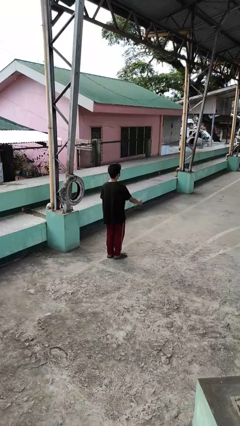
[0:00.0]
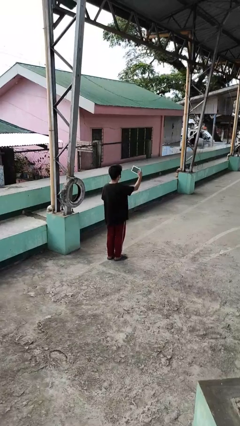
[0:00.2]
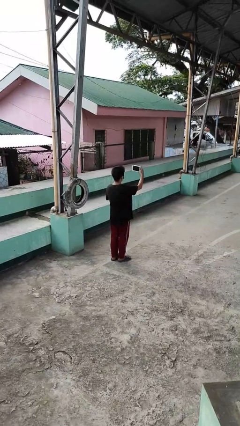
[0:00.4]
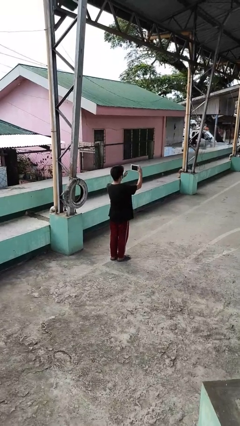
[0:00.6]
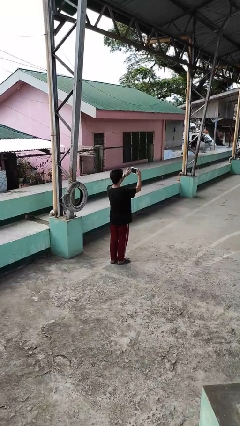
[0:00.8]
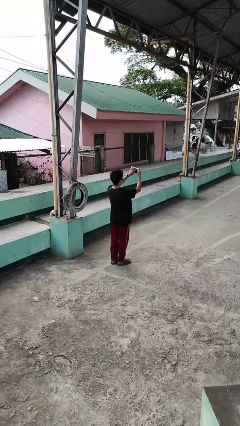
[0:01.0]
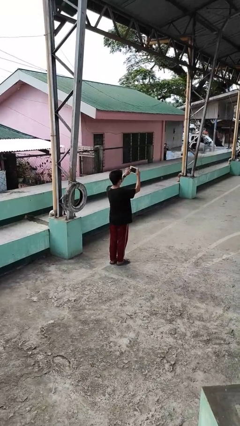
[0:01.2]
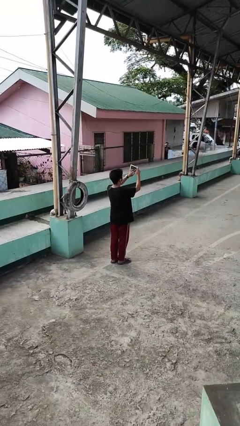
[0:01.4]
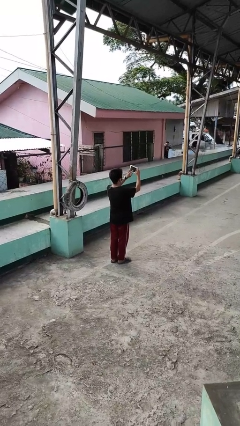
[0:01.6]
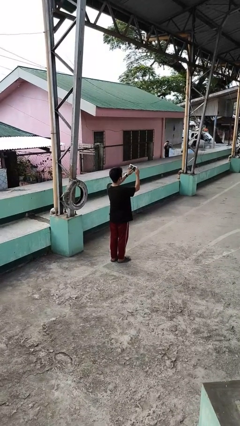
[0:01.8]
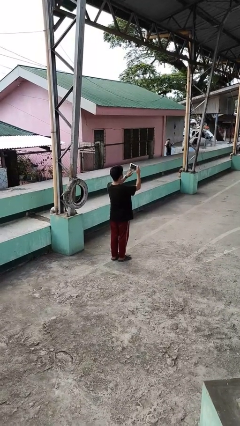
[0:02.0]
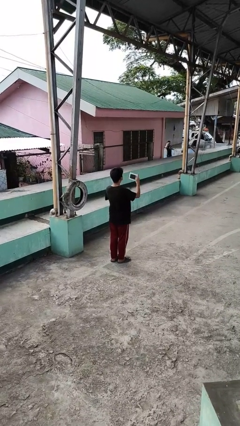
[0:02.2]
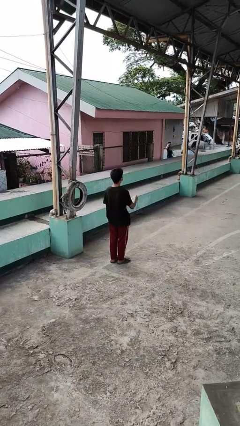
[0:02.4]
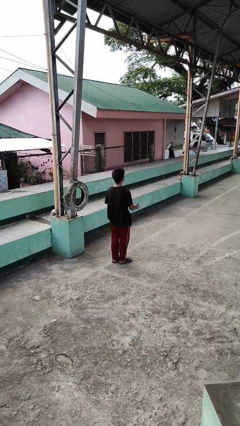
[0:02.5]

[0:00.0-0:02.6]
person interacts with tablet

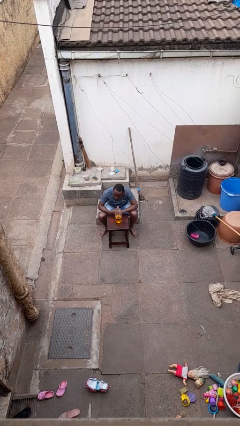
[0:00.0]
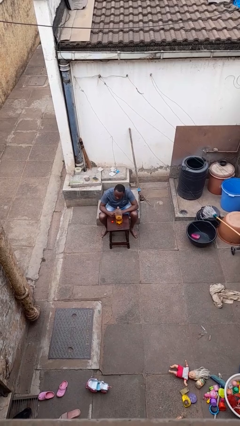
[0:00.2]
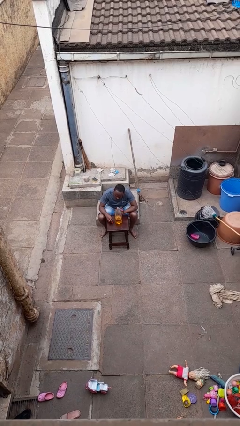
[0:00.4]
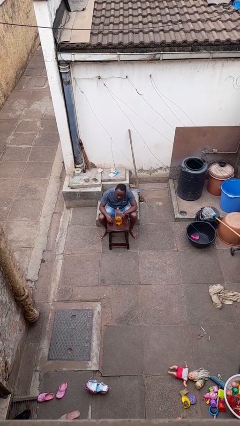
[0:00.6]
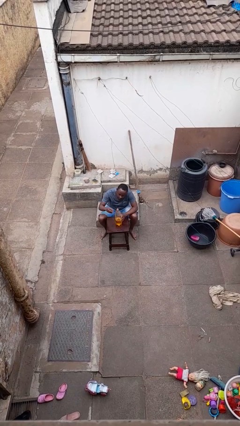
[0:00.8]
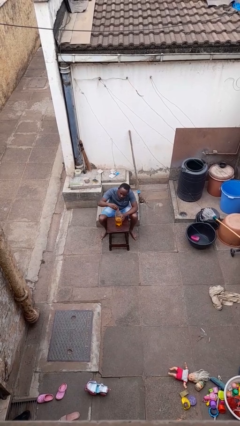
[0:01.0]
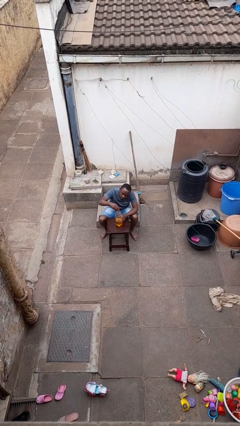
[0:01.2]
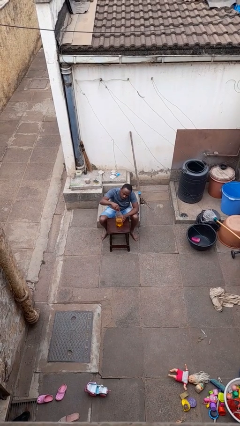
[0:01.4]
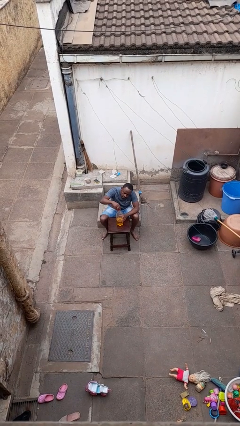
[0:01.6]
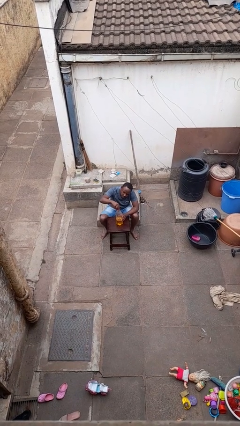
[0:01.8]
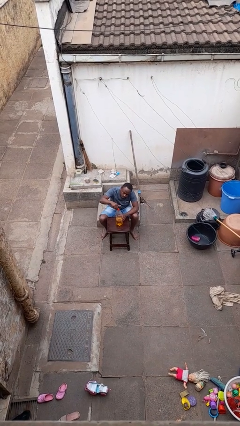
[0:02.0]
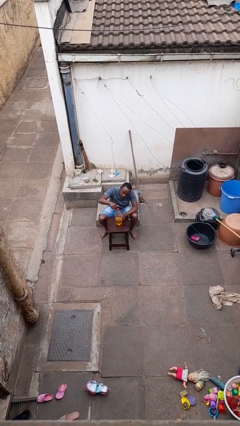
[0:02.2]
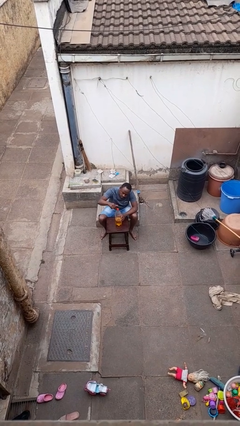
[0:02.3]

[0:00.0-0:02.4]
person screws lid to bottle

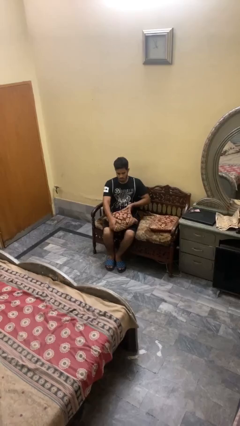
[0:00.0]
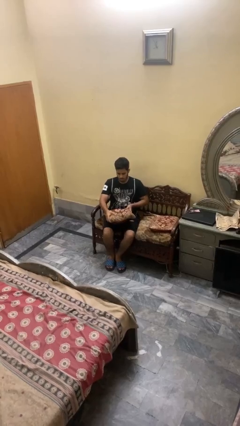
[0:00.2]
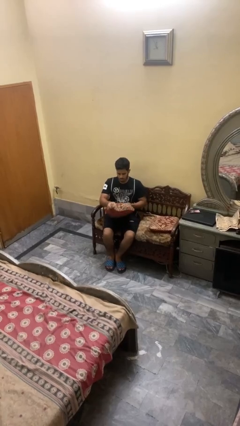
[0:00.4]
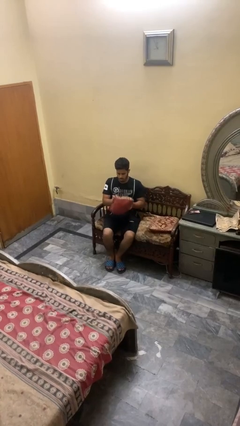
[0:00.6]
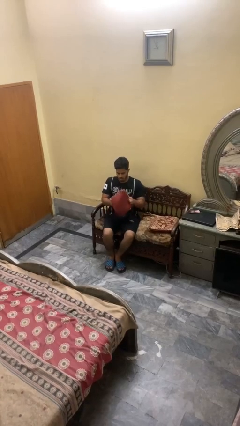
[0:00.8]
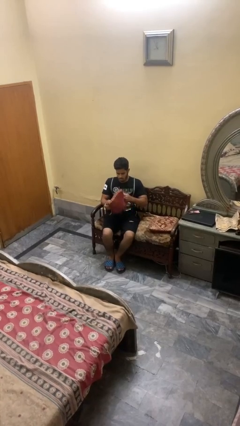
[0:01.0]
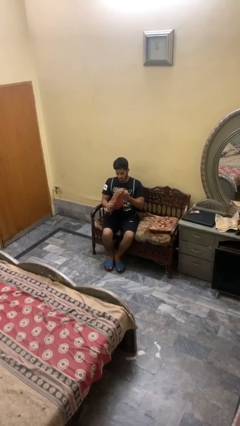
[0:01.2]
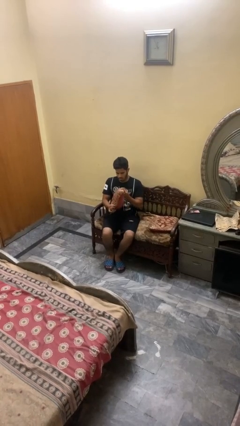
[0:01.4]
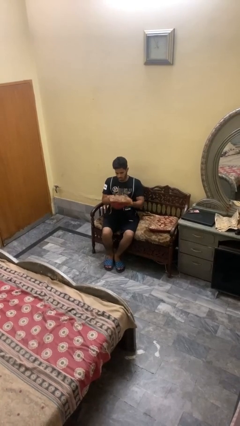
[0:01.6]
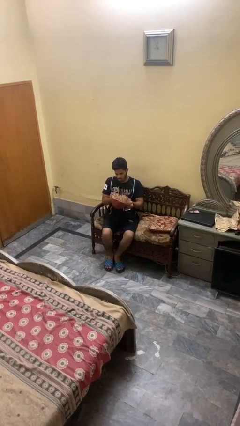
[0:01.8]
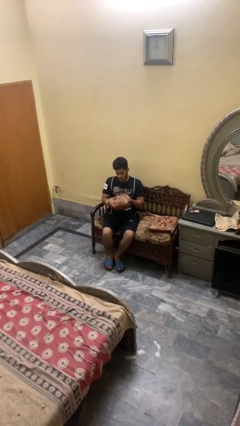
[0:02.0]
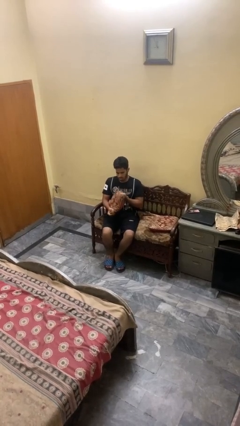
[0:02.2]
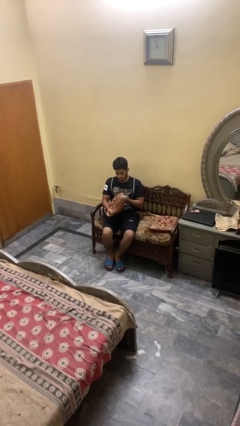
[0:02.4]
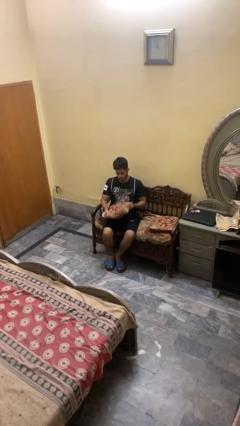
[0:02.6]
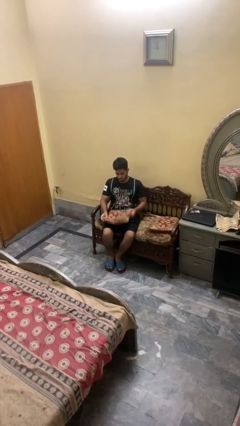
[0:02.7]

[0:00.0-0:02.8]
person squeezes object

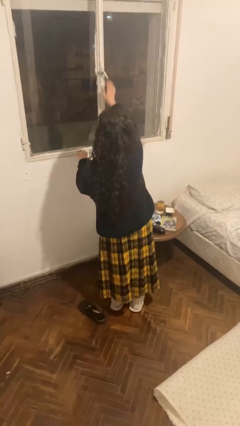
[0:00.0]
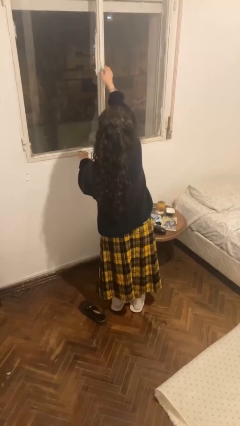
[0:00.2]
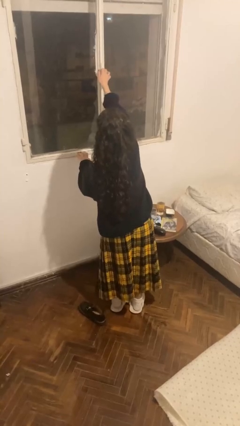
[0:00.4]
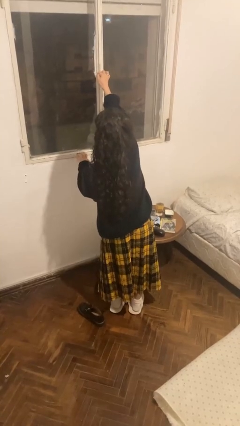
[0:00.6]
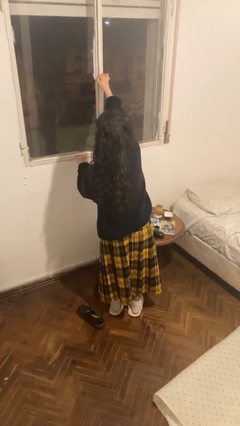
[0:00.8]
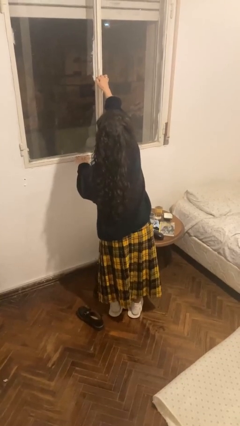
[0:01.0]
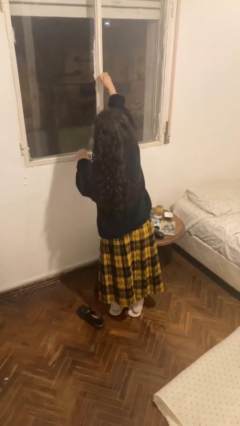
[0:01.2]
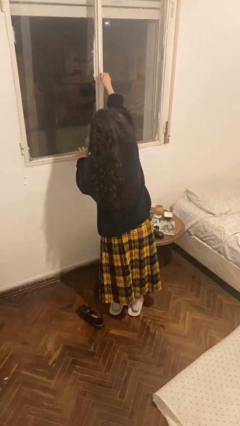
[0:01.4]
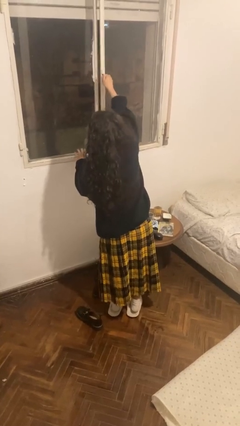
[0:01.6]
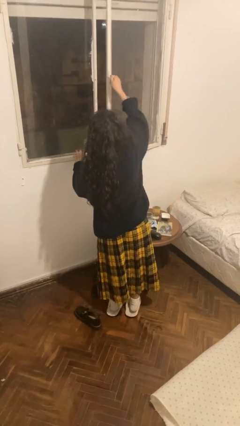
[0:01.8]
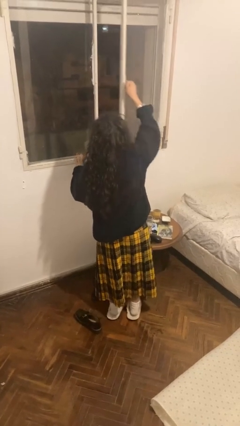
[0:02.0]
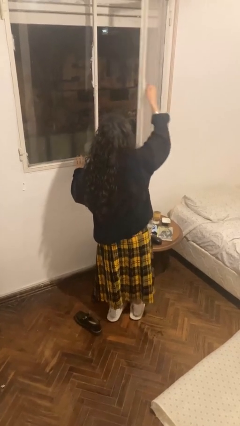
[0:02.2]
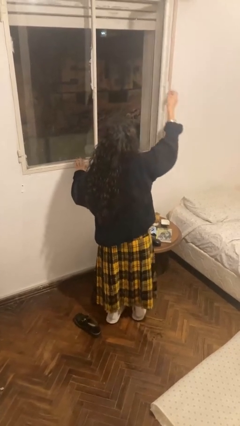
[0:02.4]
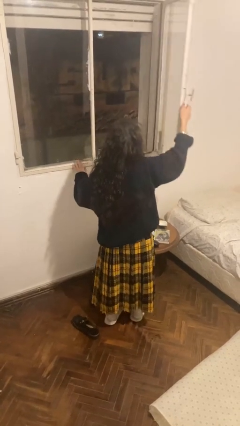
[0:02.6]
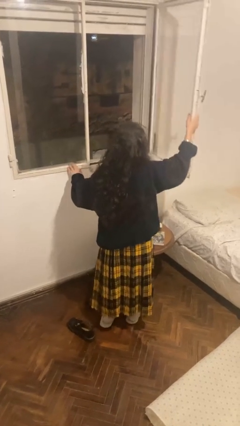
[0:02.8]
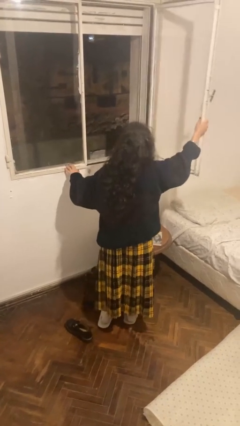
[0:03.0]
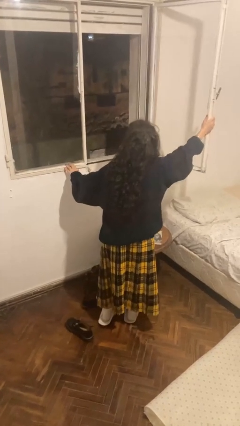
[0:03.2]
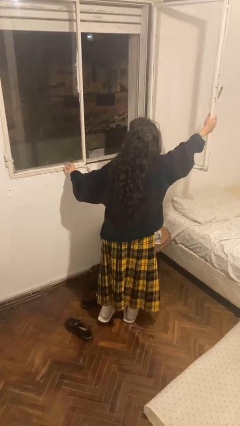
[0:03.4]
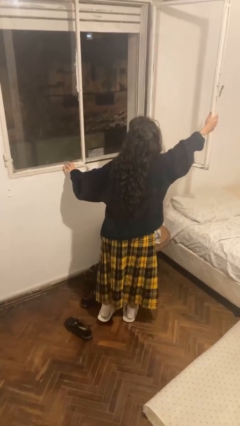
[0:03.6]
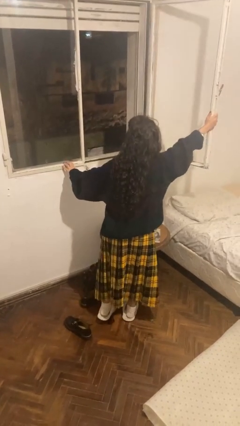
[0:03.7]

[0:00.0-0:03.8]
person opens home window

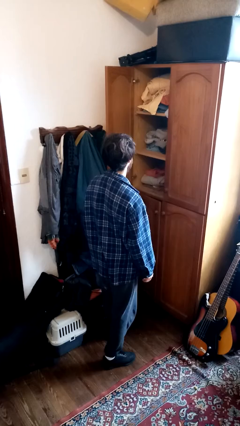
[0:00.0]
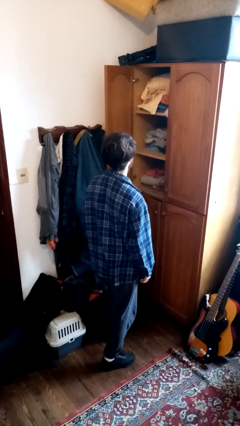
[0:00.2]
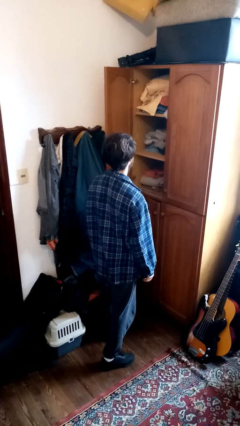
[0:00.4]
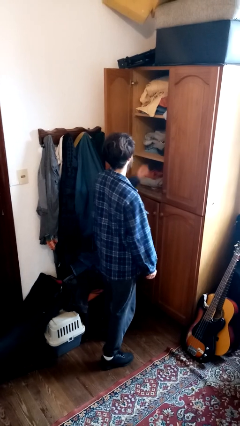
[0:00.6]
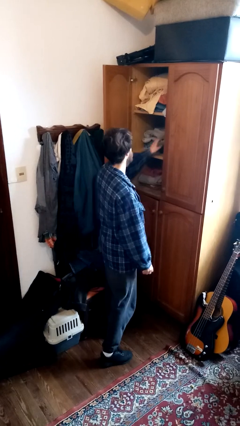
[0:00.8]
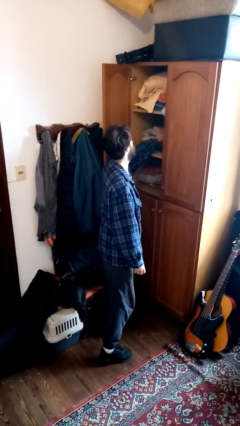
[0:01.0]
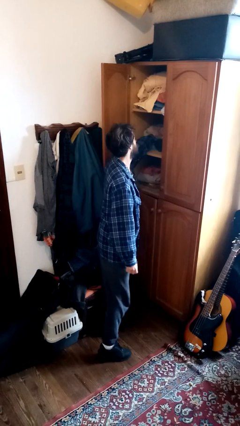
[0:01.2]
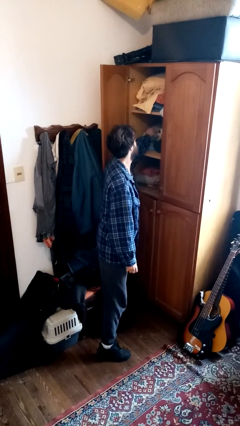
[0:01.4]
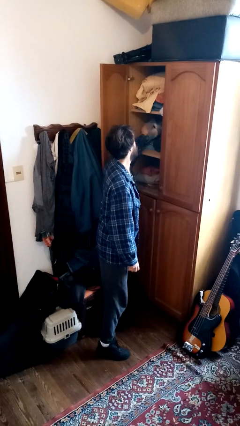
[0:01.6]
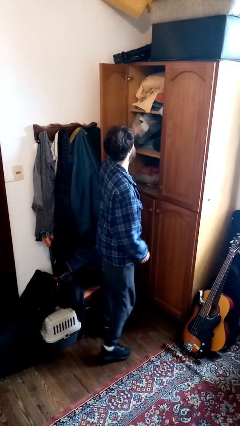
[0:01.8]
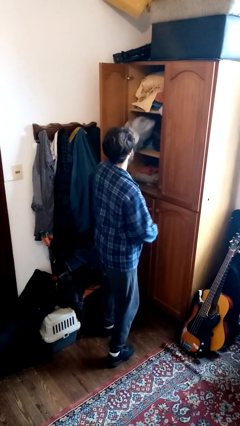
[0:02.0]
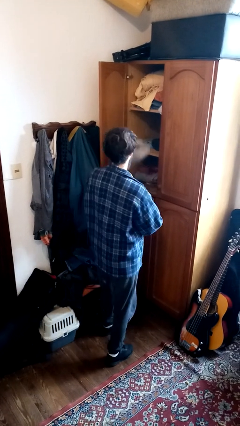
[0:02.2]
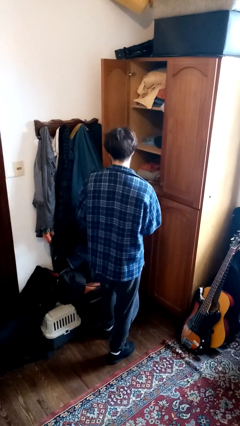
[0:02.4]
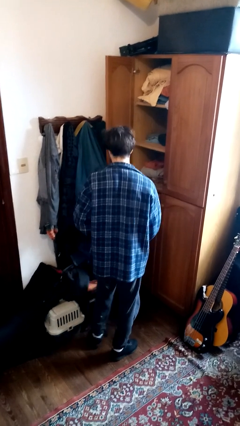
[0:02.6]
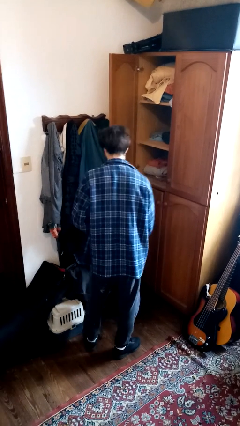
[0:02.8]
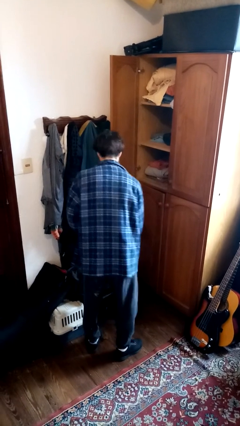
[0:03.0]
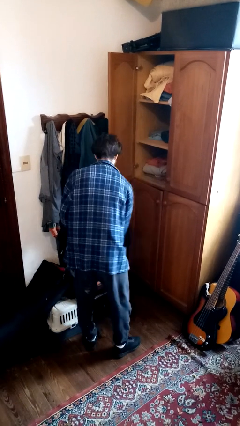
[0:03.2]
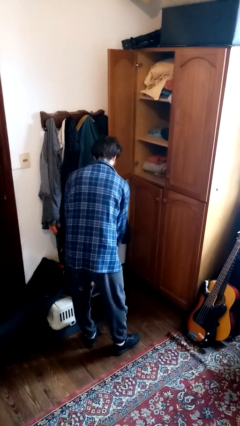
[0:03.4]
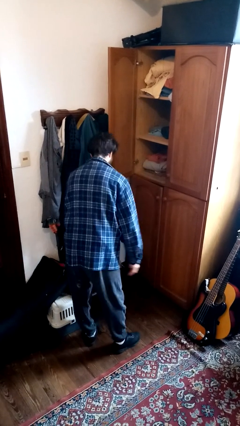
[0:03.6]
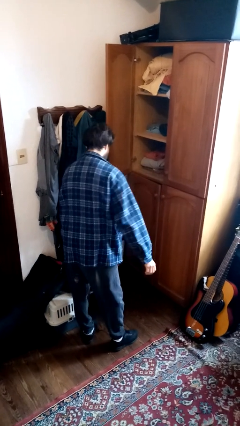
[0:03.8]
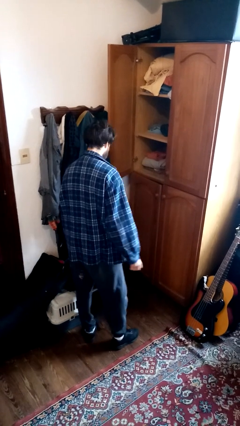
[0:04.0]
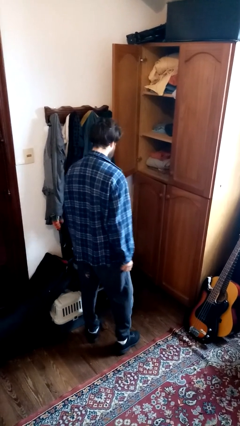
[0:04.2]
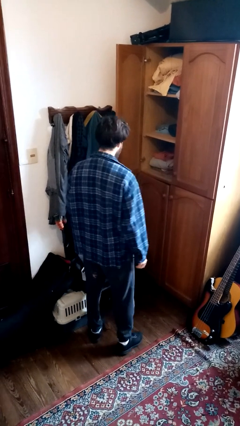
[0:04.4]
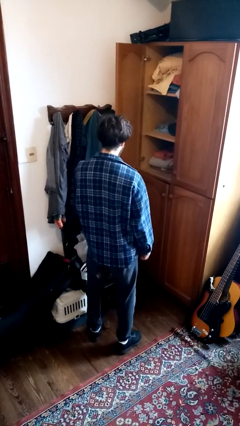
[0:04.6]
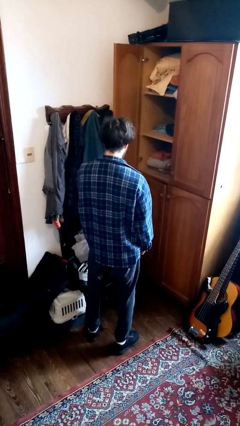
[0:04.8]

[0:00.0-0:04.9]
person takes clothes from dresser

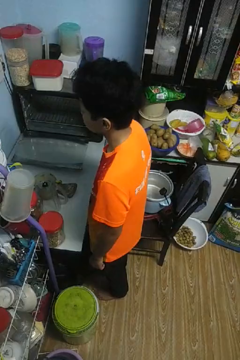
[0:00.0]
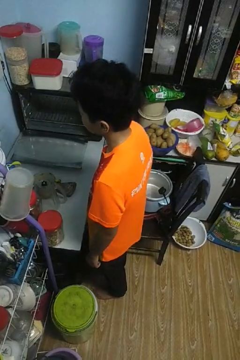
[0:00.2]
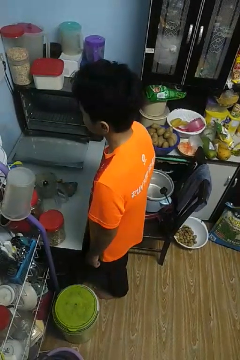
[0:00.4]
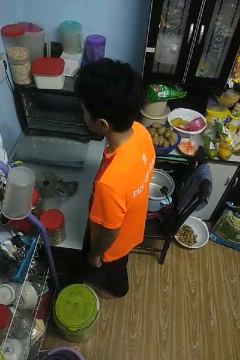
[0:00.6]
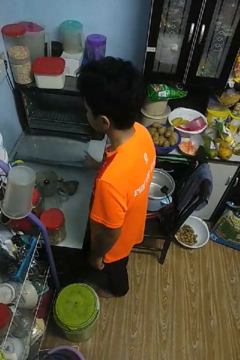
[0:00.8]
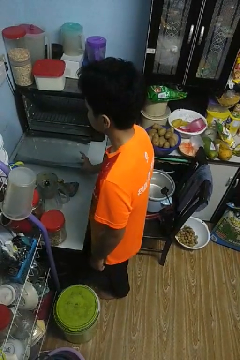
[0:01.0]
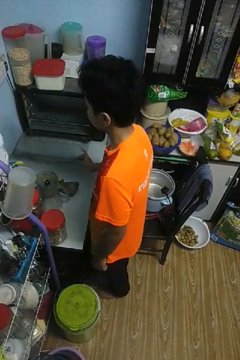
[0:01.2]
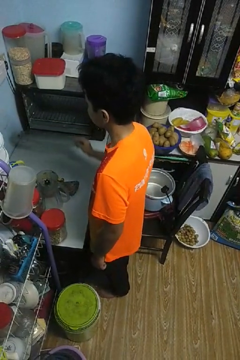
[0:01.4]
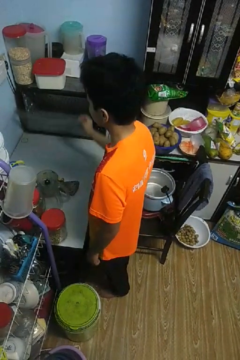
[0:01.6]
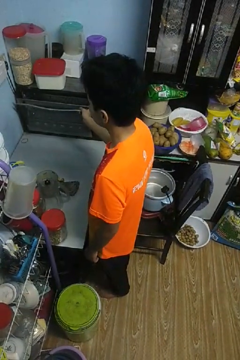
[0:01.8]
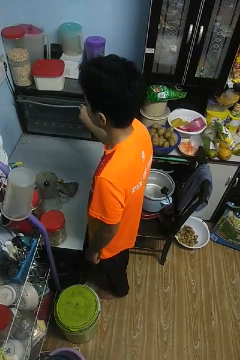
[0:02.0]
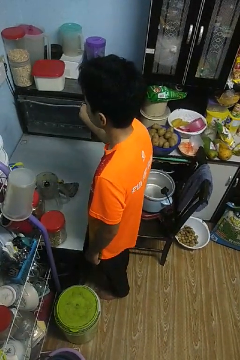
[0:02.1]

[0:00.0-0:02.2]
person closes oven door
